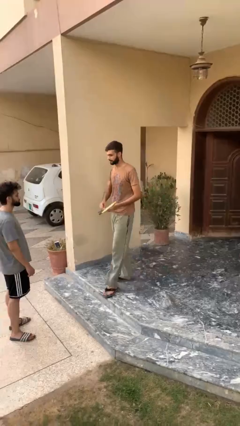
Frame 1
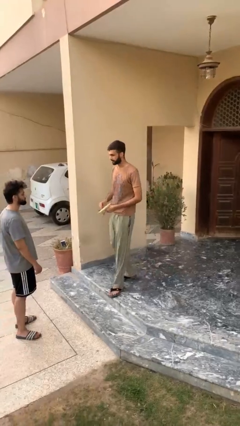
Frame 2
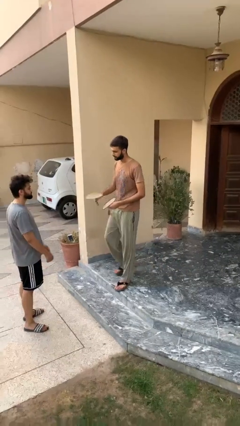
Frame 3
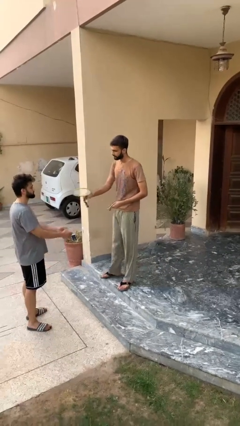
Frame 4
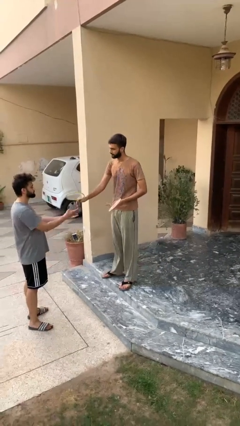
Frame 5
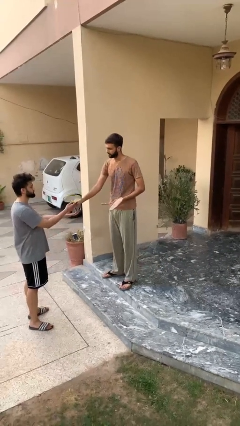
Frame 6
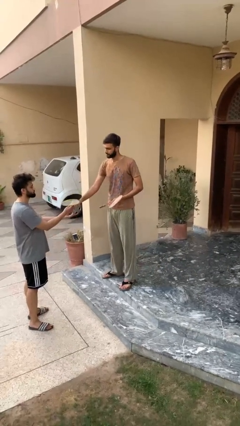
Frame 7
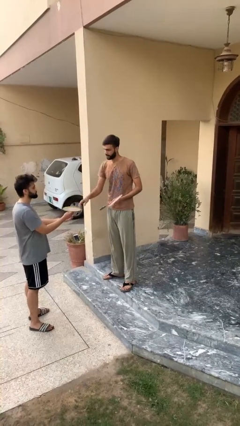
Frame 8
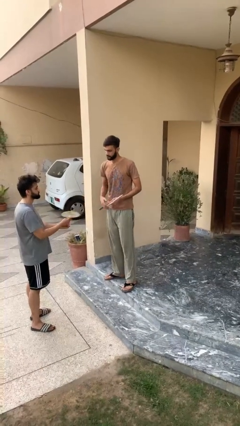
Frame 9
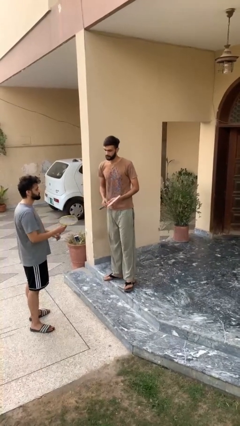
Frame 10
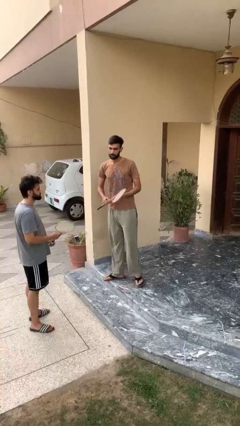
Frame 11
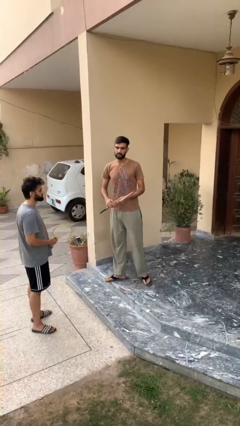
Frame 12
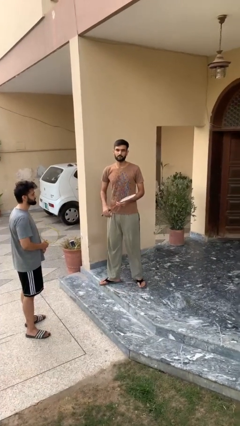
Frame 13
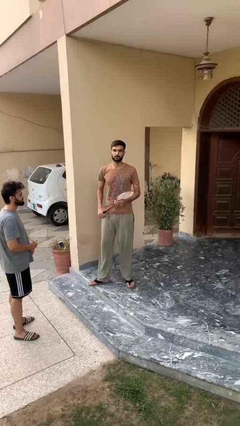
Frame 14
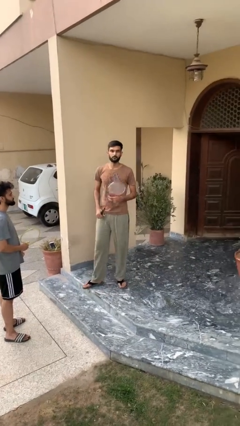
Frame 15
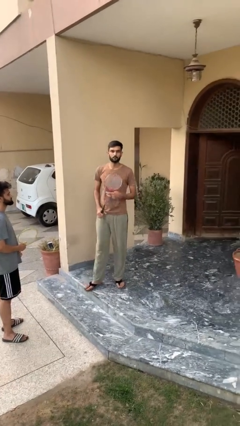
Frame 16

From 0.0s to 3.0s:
person transfers object to person

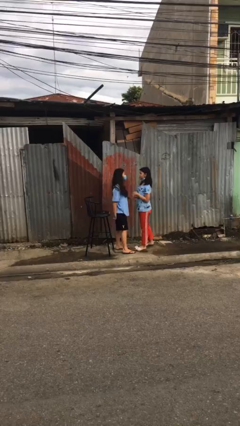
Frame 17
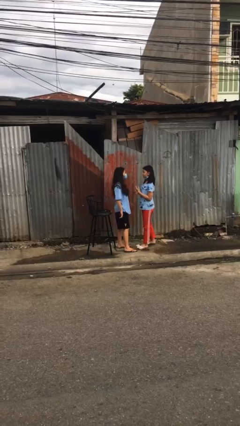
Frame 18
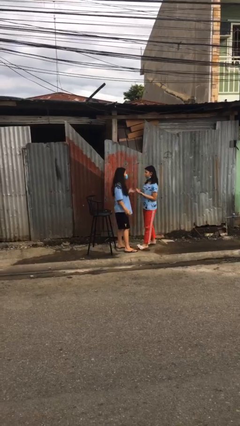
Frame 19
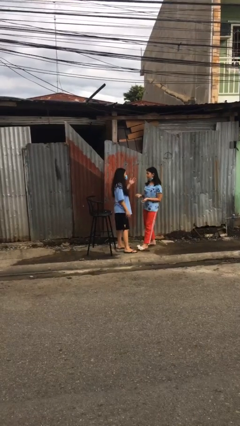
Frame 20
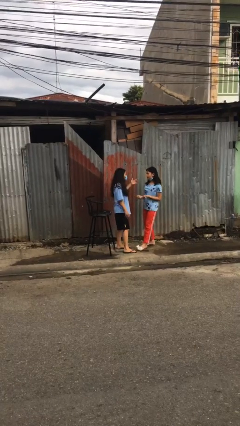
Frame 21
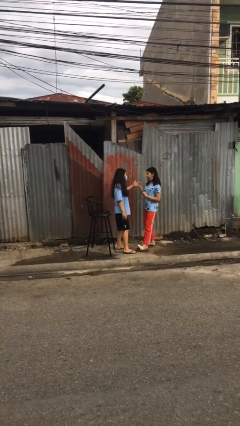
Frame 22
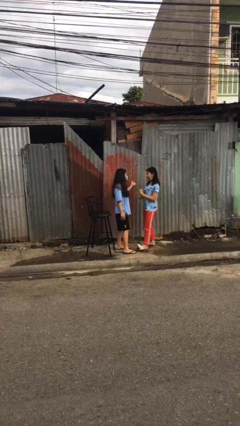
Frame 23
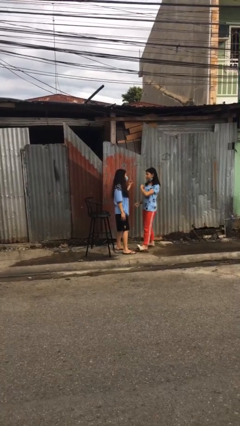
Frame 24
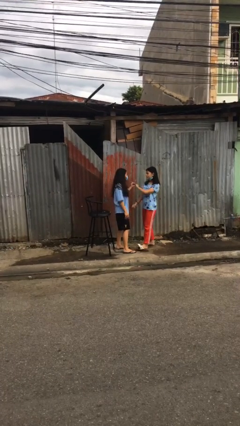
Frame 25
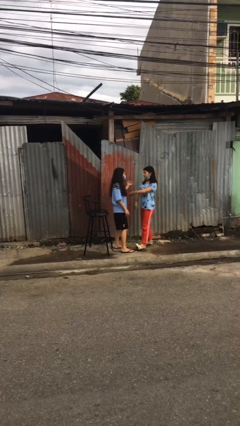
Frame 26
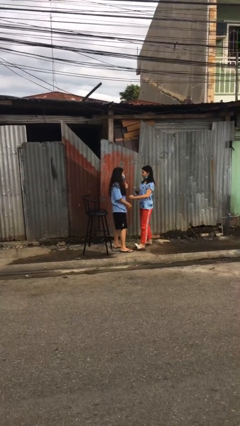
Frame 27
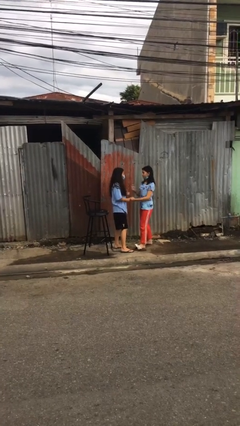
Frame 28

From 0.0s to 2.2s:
person talks to person

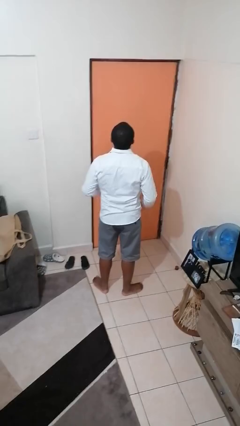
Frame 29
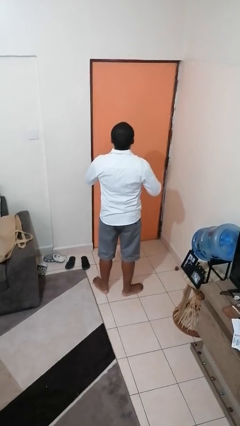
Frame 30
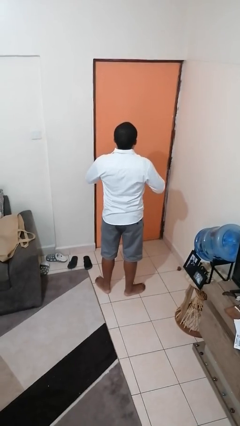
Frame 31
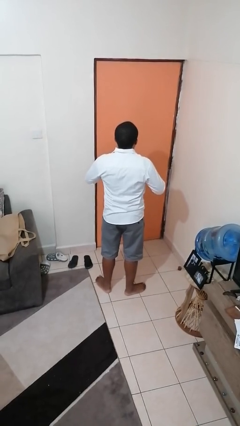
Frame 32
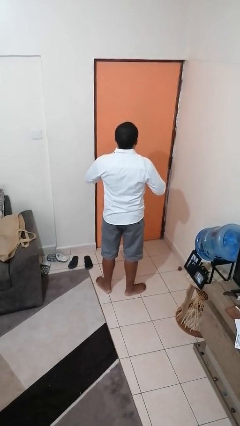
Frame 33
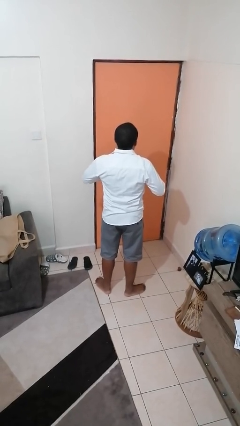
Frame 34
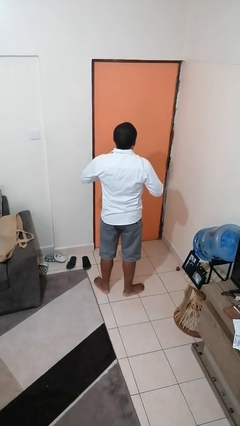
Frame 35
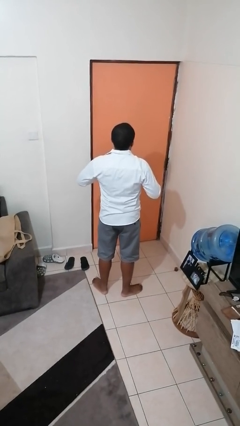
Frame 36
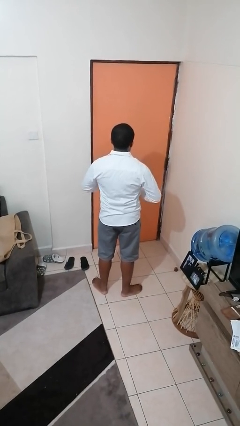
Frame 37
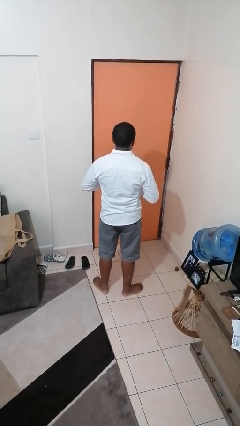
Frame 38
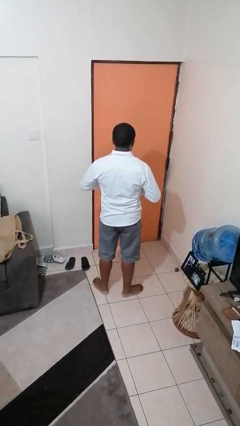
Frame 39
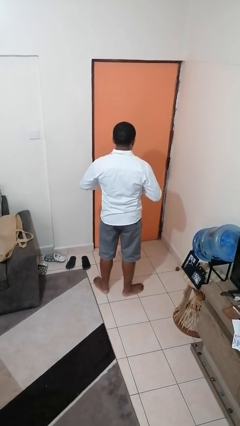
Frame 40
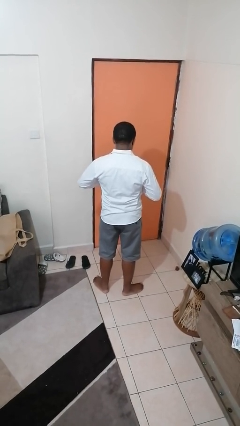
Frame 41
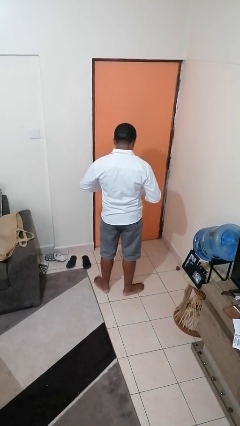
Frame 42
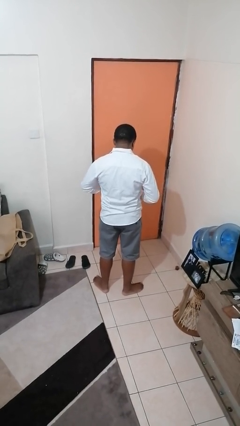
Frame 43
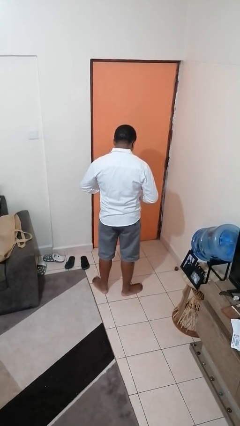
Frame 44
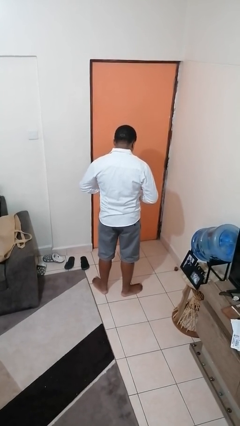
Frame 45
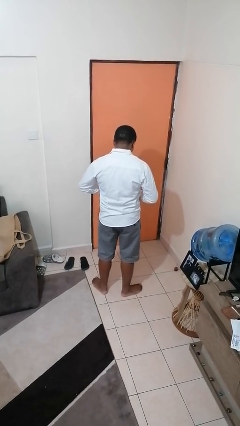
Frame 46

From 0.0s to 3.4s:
person unbuttons shirt

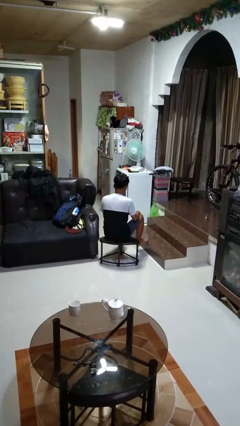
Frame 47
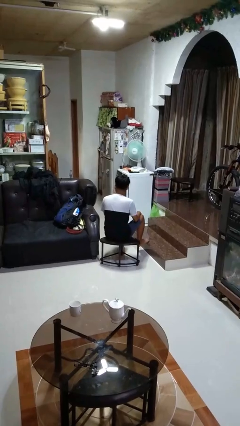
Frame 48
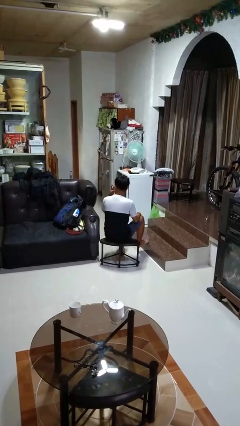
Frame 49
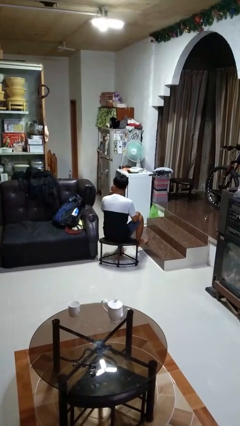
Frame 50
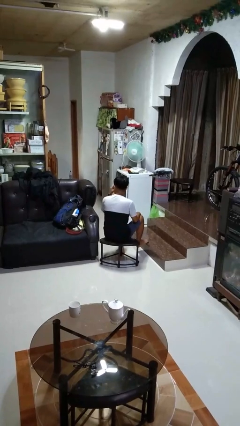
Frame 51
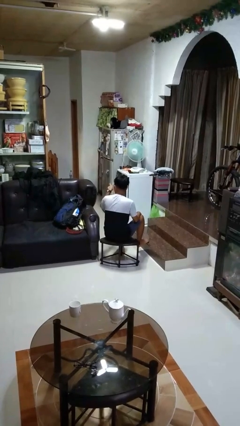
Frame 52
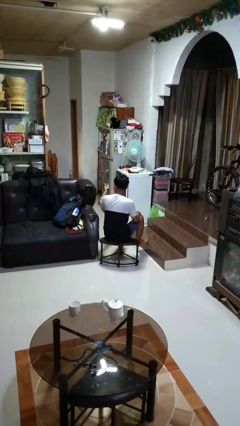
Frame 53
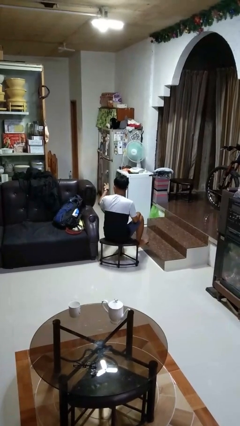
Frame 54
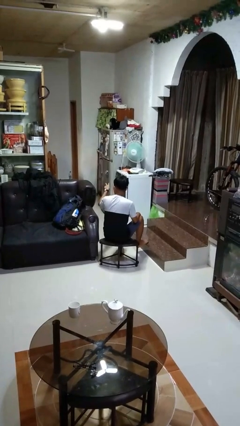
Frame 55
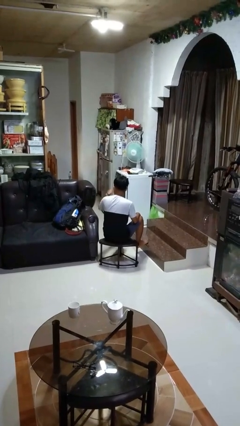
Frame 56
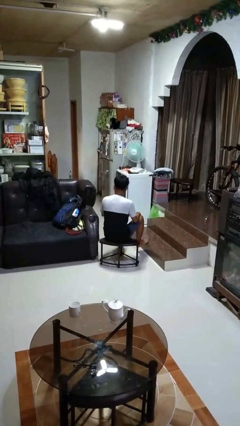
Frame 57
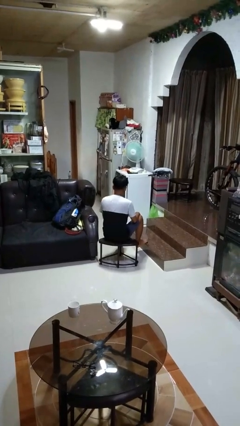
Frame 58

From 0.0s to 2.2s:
person gestures watch closely

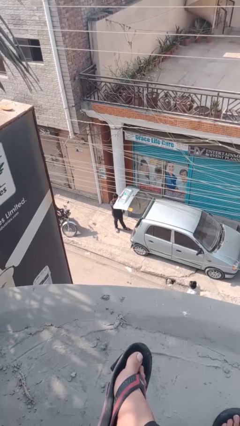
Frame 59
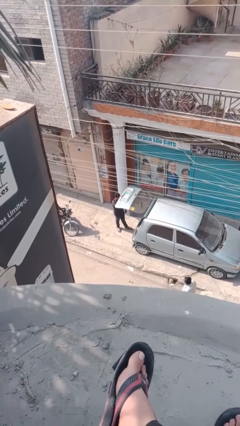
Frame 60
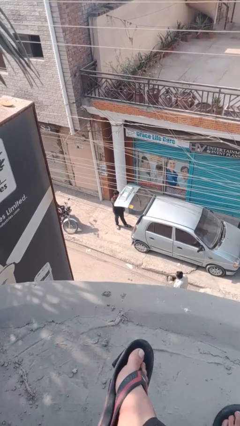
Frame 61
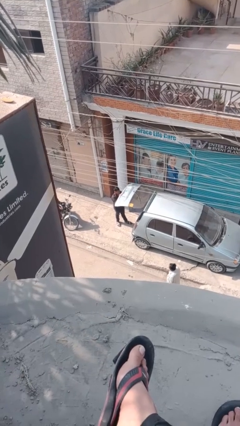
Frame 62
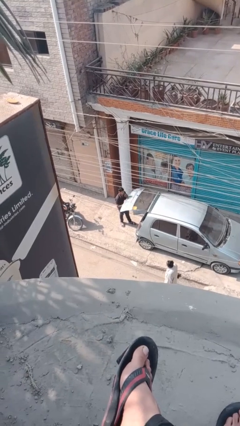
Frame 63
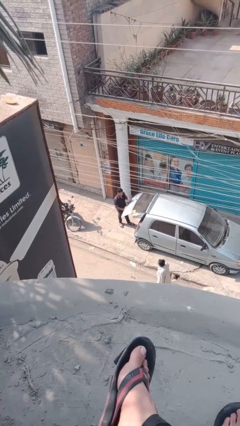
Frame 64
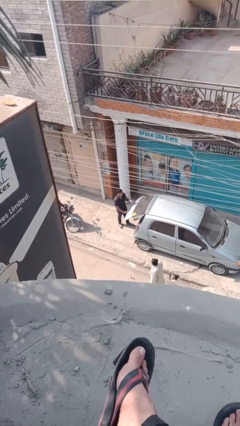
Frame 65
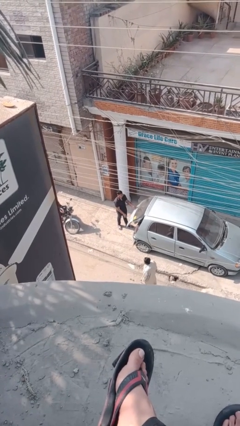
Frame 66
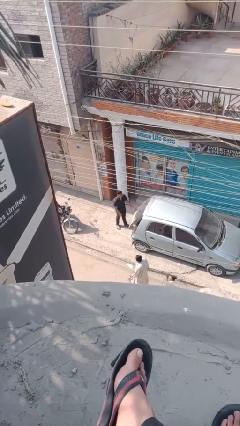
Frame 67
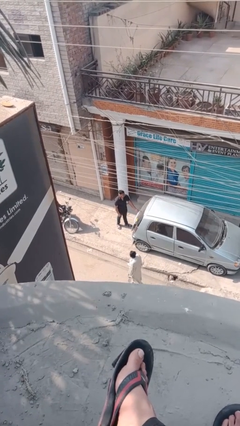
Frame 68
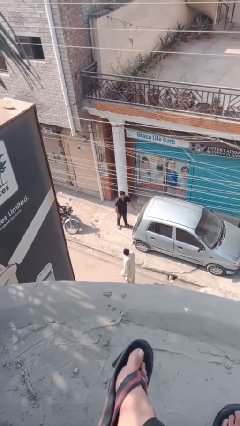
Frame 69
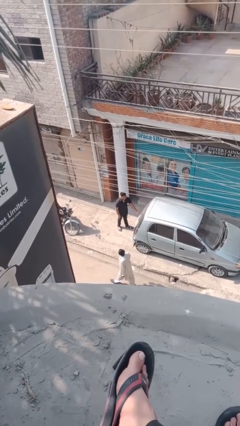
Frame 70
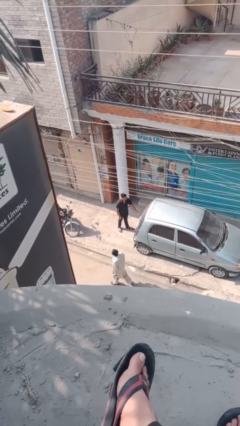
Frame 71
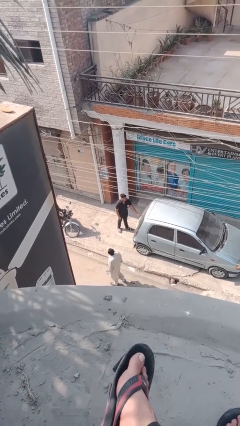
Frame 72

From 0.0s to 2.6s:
person closes car trunk

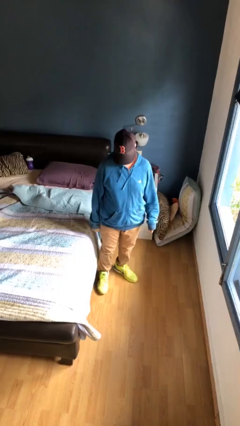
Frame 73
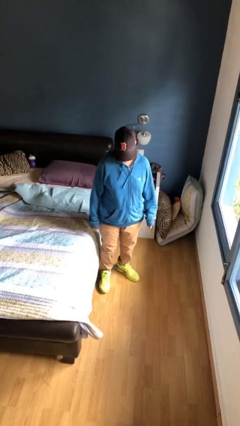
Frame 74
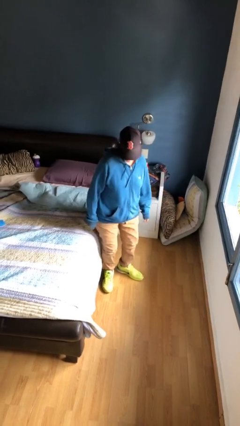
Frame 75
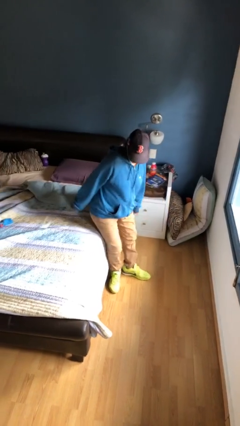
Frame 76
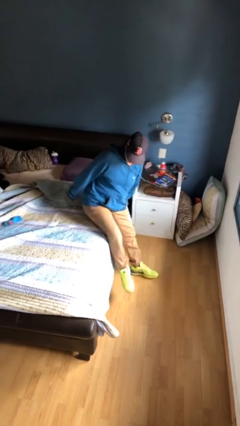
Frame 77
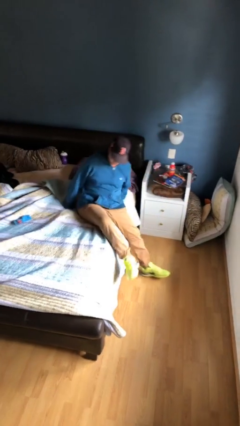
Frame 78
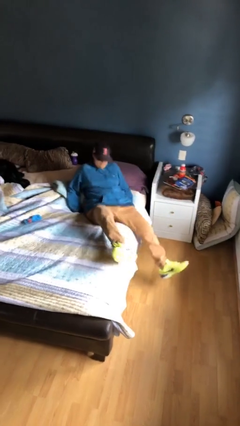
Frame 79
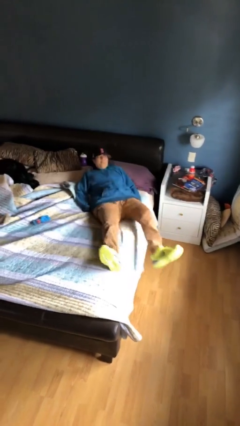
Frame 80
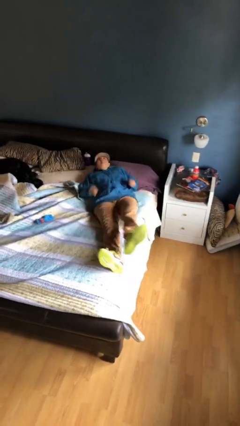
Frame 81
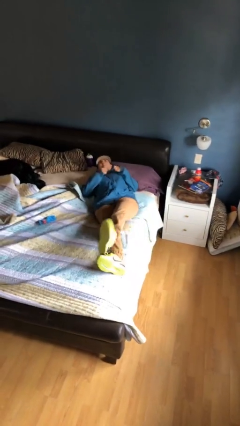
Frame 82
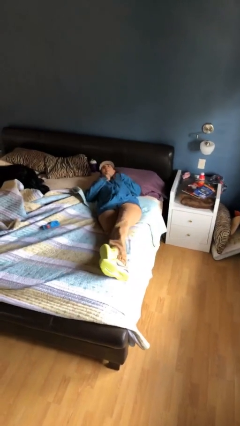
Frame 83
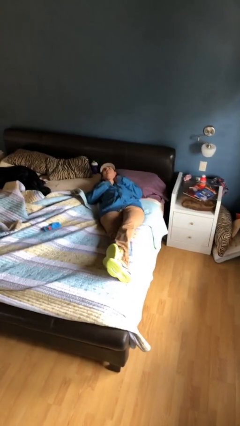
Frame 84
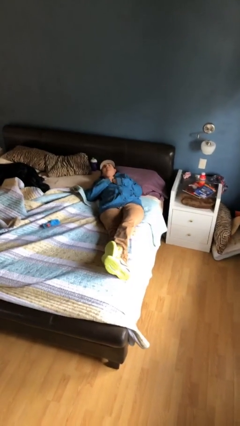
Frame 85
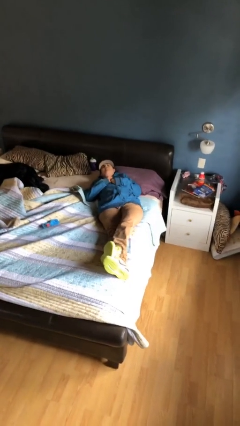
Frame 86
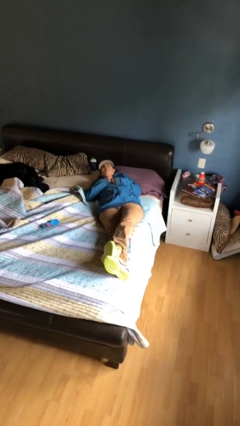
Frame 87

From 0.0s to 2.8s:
person lies down on bed

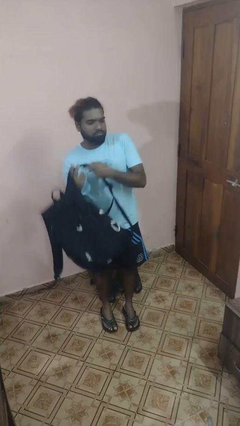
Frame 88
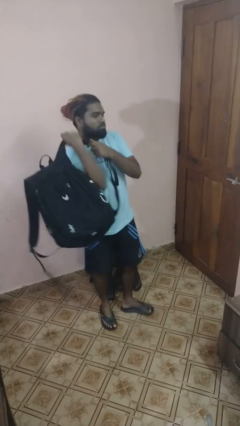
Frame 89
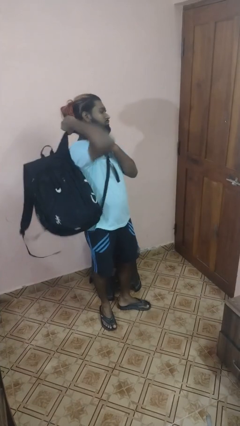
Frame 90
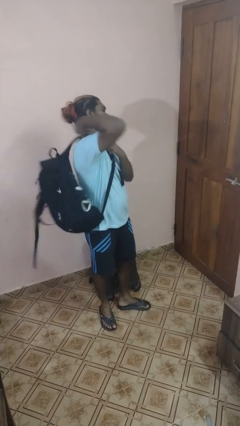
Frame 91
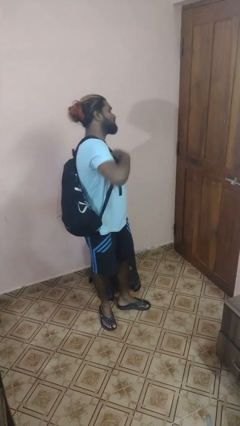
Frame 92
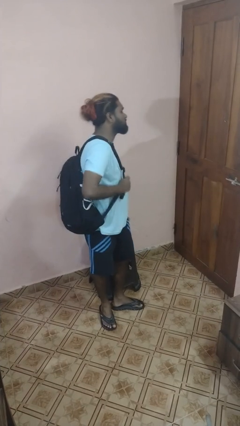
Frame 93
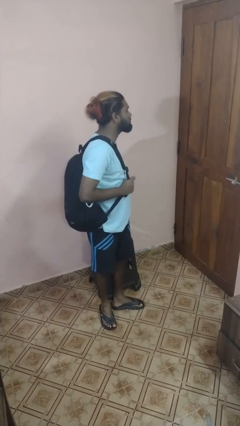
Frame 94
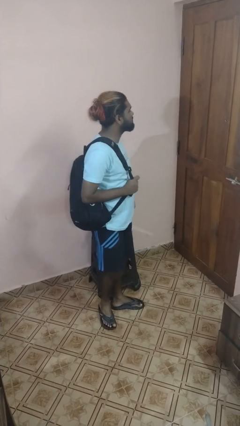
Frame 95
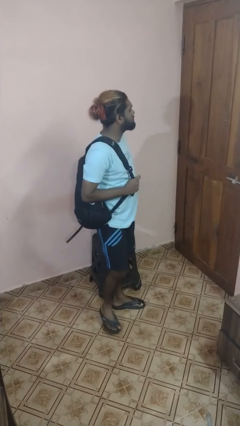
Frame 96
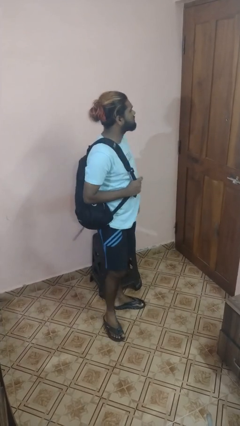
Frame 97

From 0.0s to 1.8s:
person puts on backpack
